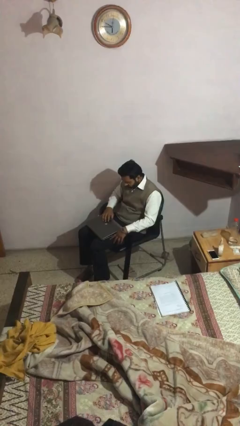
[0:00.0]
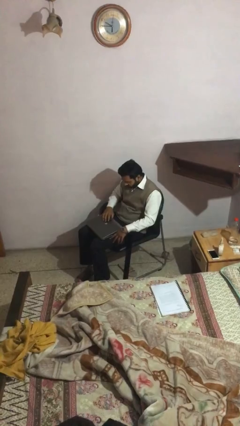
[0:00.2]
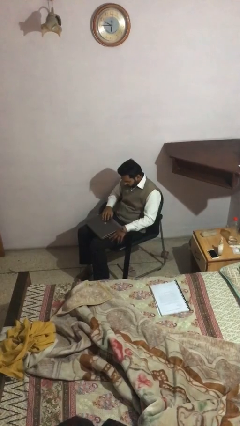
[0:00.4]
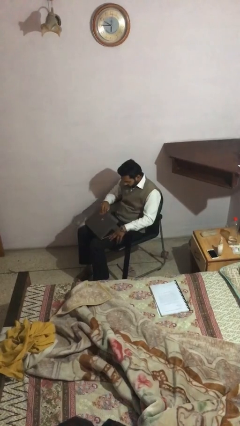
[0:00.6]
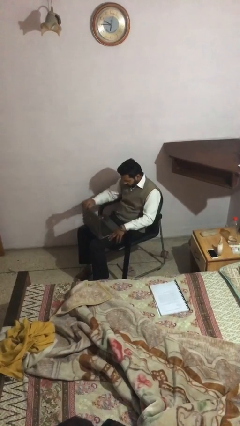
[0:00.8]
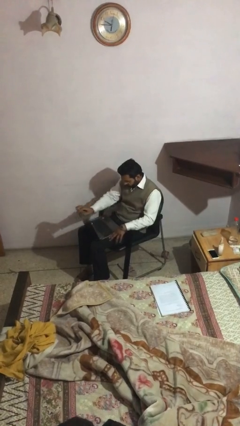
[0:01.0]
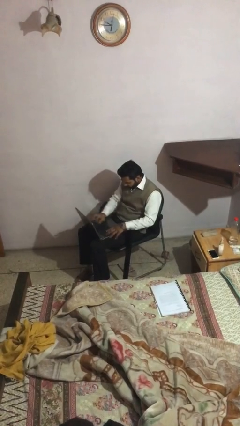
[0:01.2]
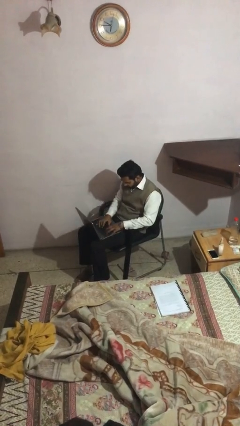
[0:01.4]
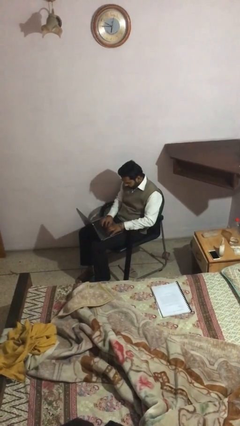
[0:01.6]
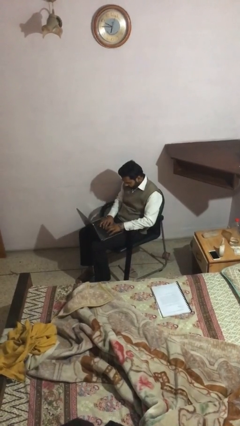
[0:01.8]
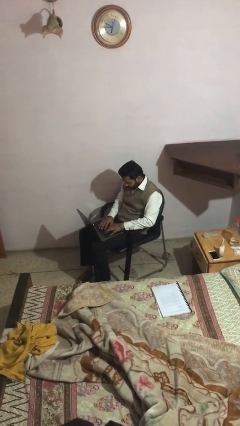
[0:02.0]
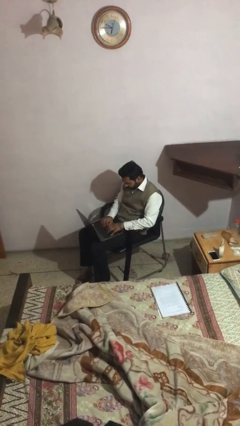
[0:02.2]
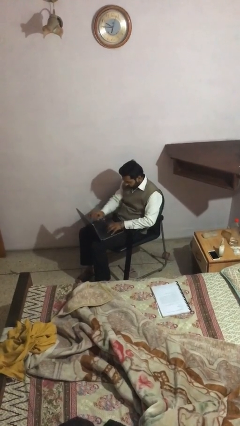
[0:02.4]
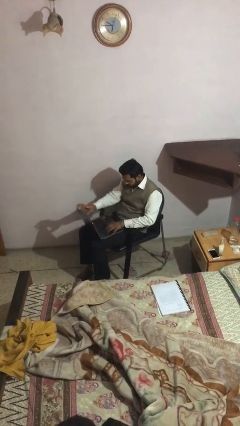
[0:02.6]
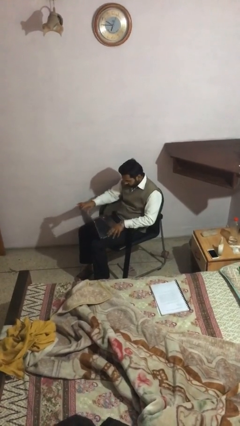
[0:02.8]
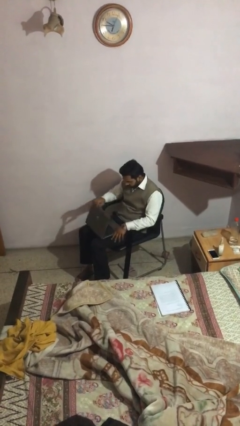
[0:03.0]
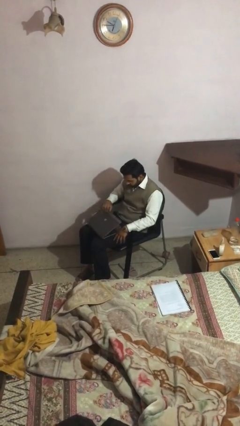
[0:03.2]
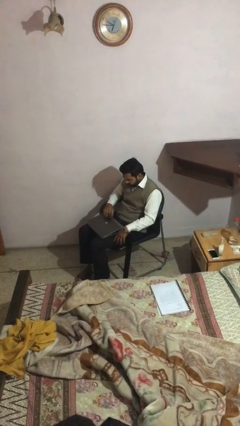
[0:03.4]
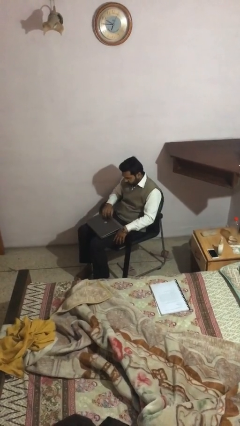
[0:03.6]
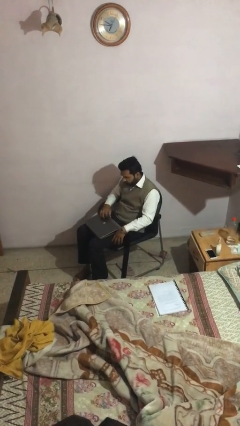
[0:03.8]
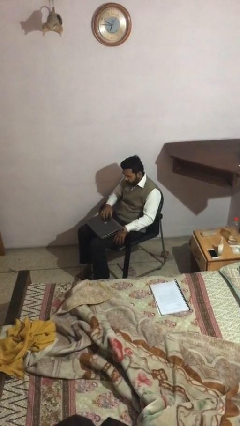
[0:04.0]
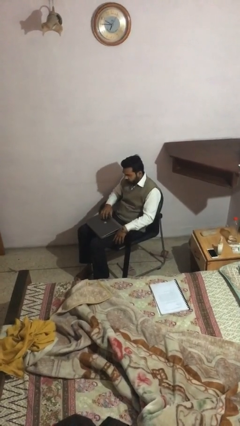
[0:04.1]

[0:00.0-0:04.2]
person interacts with laptop

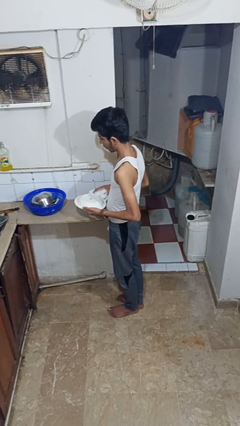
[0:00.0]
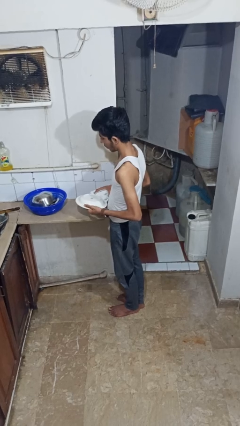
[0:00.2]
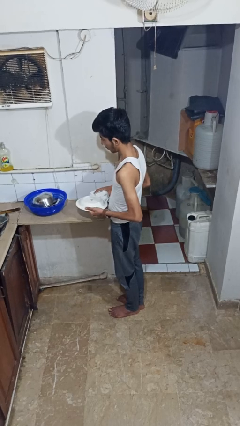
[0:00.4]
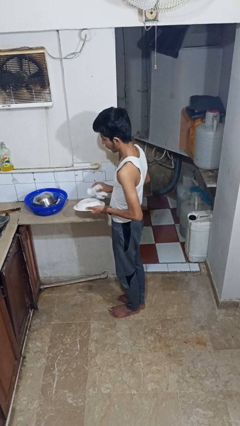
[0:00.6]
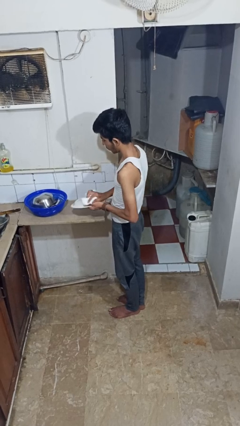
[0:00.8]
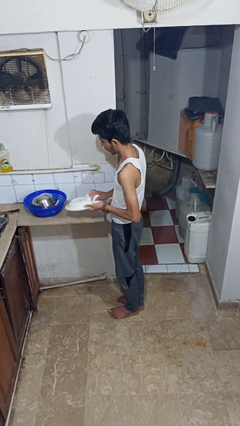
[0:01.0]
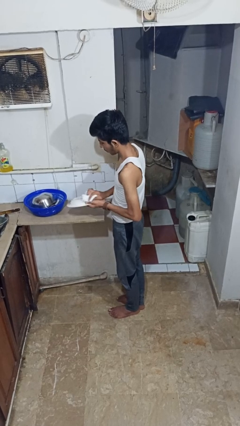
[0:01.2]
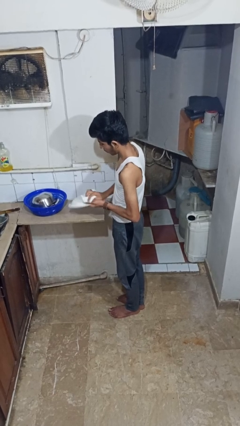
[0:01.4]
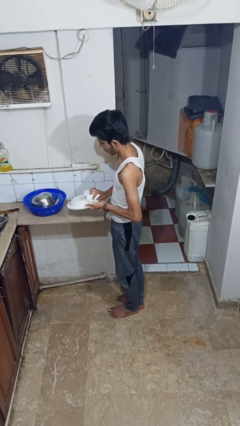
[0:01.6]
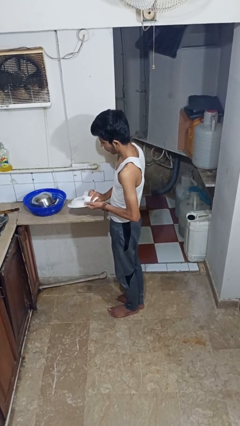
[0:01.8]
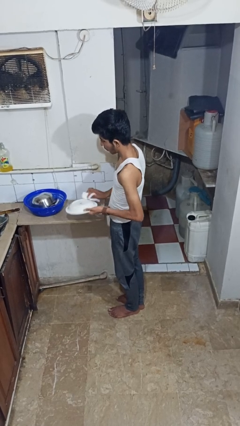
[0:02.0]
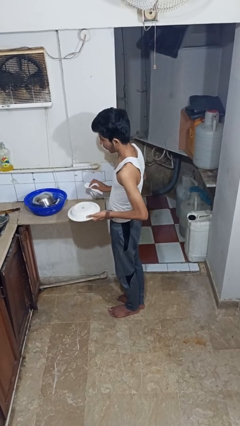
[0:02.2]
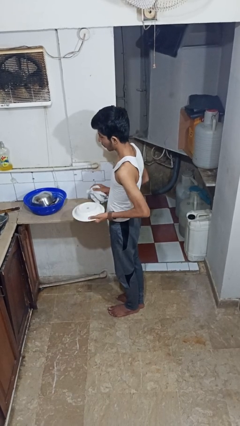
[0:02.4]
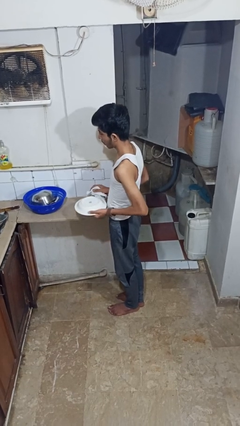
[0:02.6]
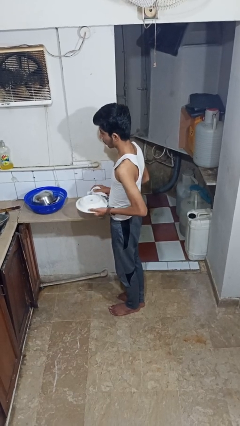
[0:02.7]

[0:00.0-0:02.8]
person dries dish

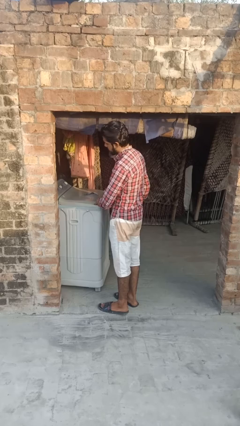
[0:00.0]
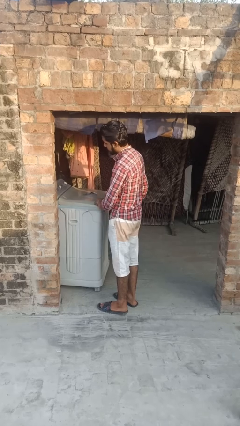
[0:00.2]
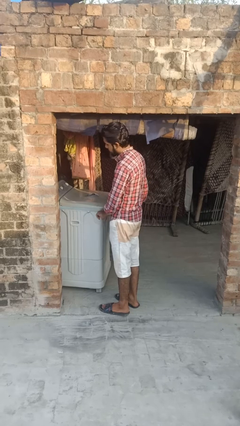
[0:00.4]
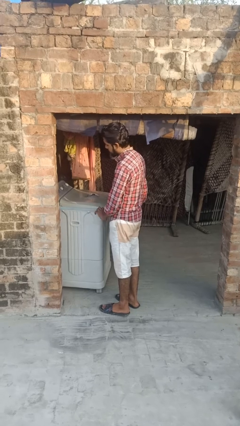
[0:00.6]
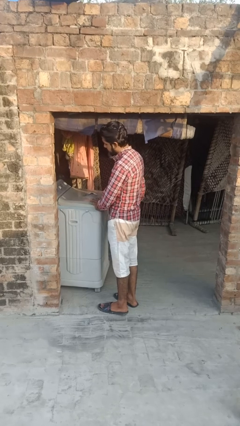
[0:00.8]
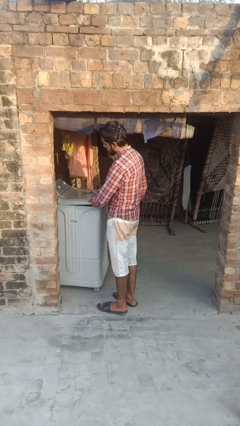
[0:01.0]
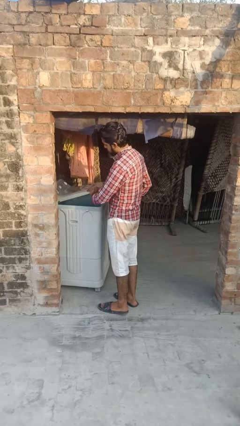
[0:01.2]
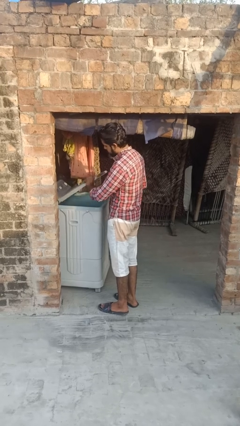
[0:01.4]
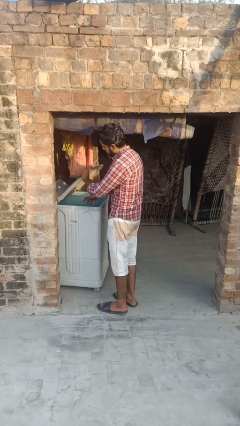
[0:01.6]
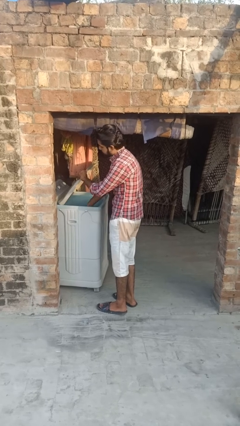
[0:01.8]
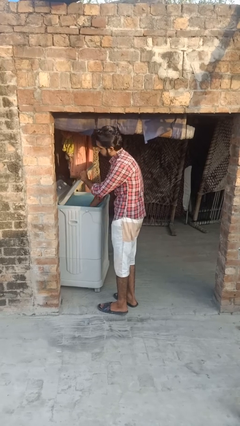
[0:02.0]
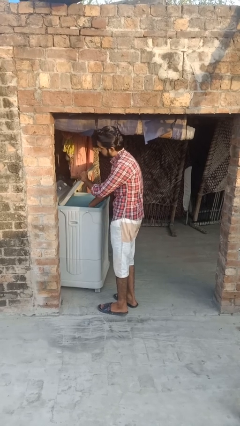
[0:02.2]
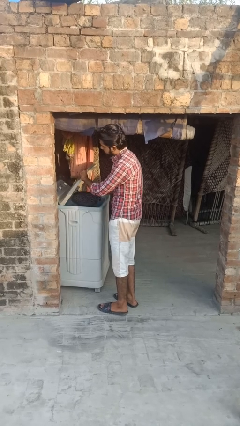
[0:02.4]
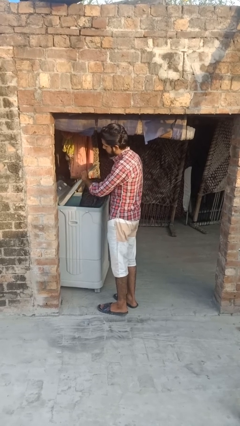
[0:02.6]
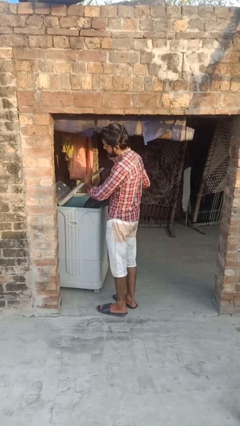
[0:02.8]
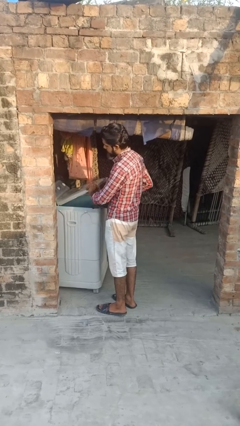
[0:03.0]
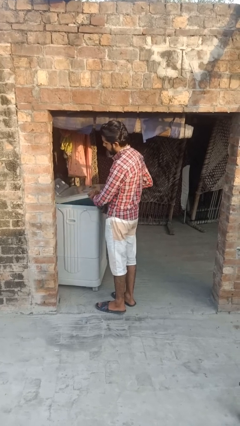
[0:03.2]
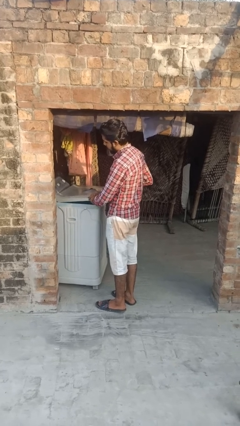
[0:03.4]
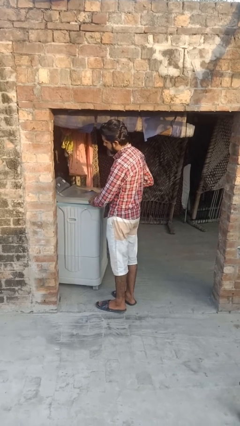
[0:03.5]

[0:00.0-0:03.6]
person unloads clotheswasher

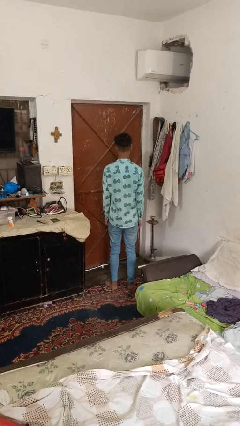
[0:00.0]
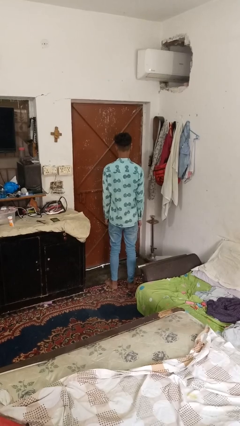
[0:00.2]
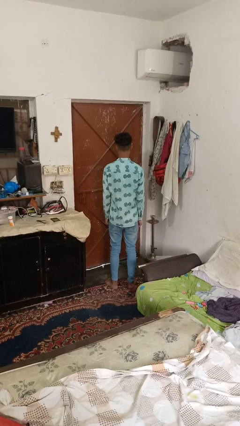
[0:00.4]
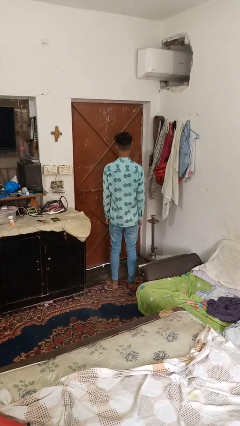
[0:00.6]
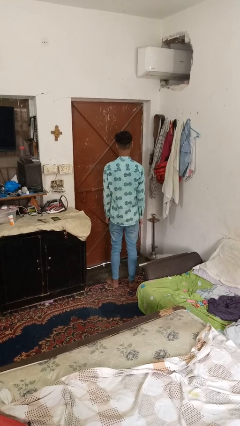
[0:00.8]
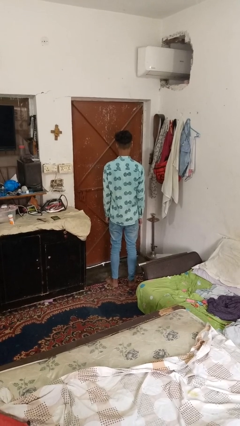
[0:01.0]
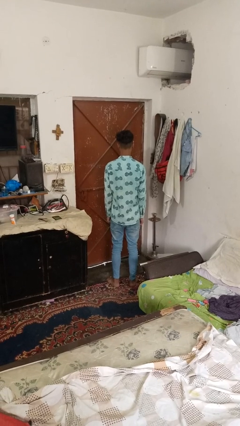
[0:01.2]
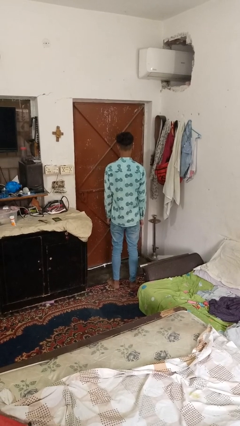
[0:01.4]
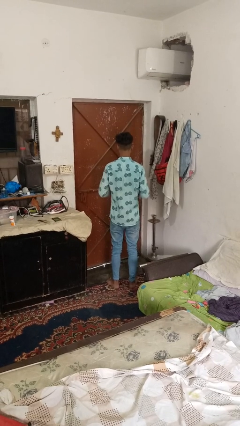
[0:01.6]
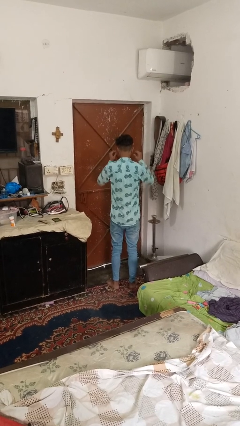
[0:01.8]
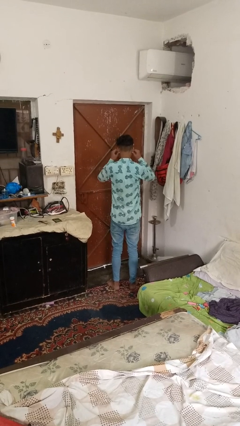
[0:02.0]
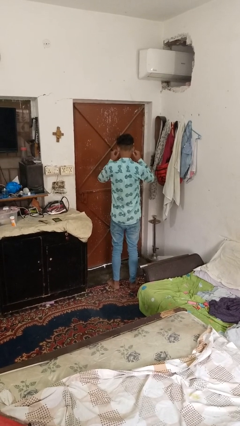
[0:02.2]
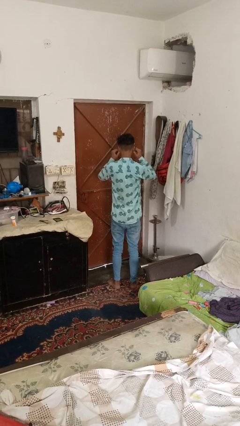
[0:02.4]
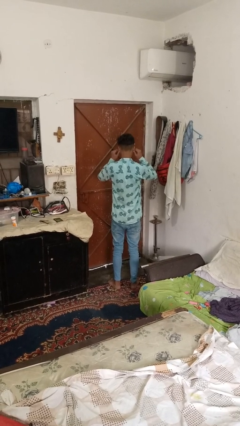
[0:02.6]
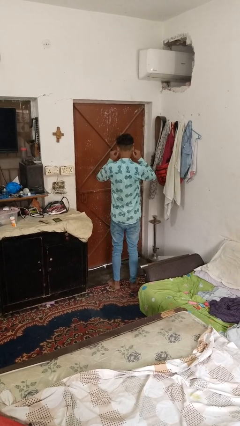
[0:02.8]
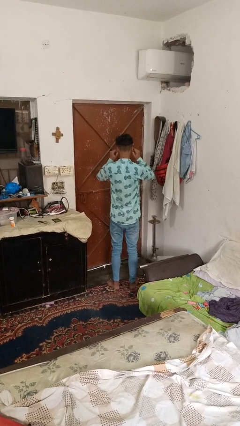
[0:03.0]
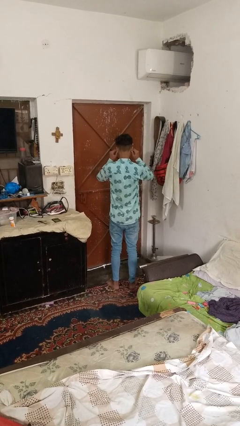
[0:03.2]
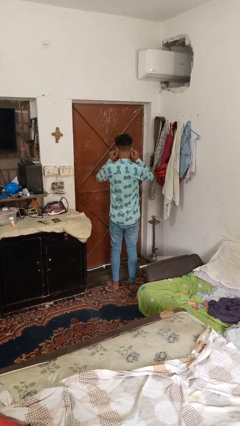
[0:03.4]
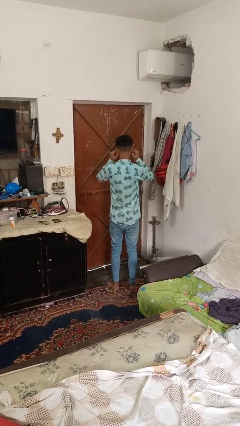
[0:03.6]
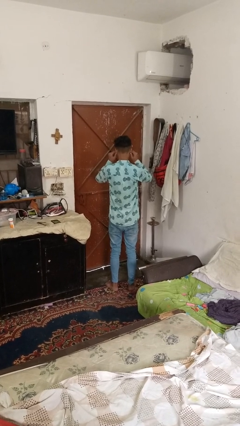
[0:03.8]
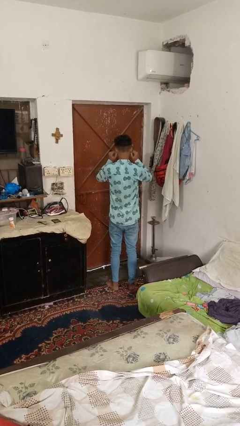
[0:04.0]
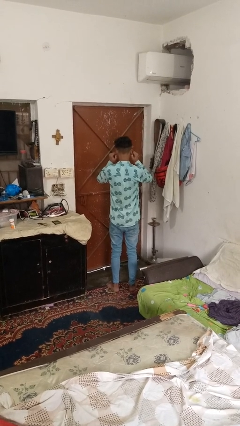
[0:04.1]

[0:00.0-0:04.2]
person touches earlobe

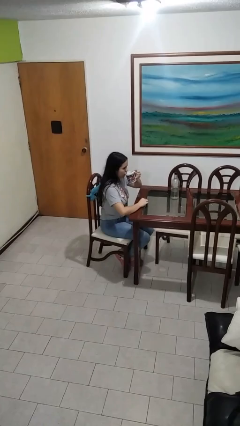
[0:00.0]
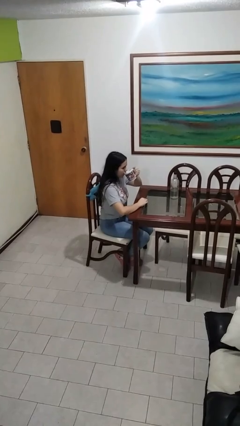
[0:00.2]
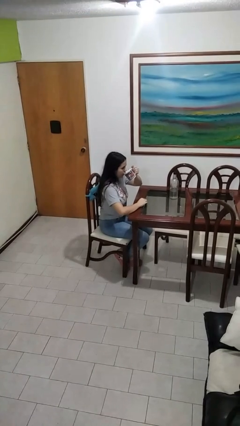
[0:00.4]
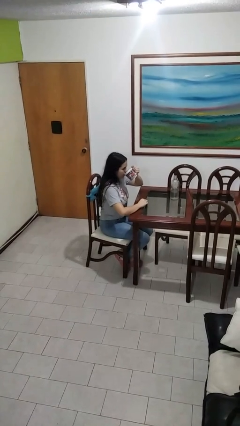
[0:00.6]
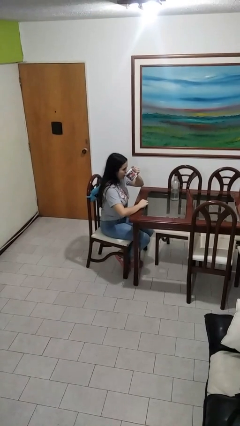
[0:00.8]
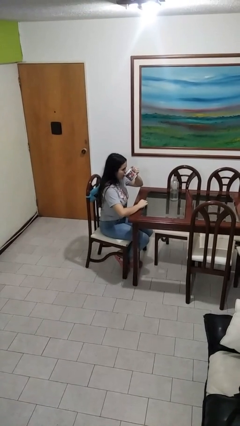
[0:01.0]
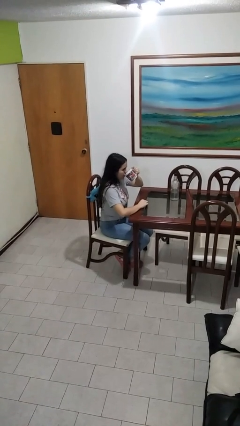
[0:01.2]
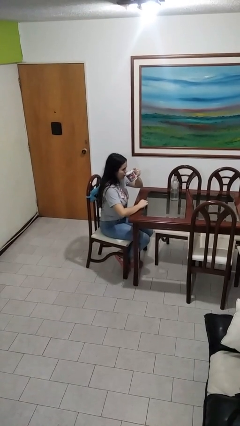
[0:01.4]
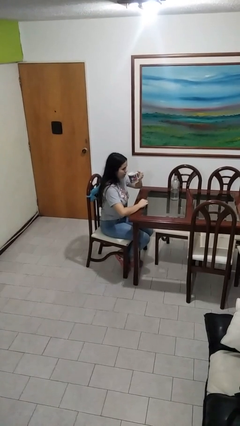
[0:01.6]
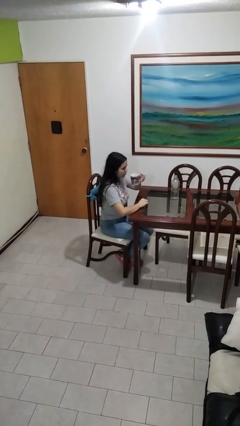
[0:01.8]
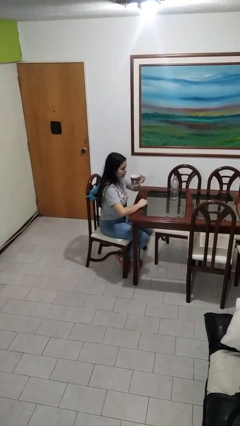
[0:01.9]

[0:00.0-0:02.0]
person drinks from mug

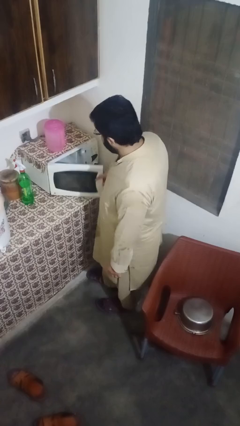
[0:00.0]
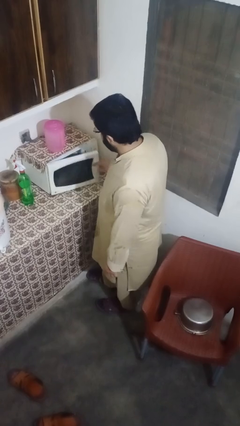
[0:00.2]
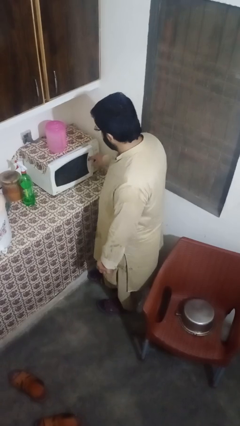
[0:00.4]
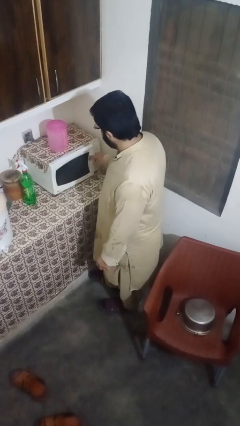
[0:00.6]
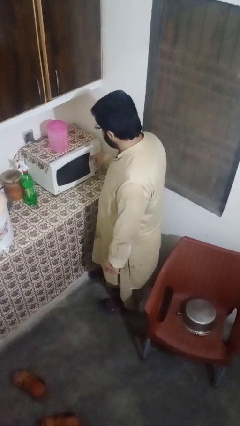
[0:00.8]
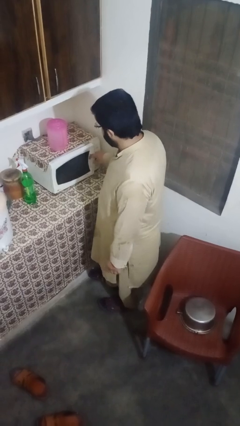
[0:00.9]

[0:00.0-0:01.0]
person closes microwave
